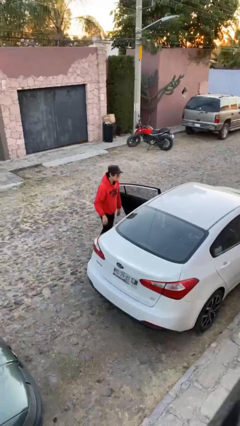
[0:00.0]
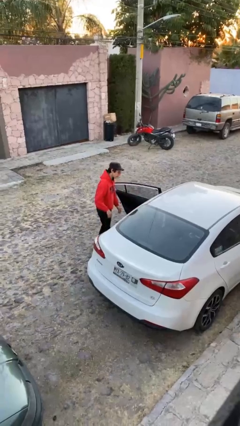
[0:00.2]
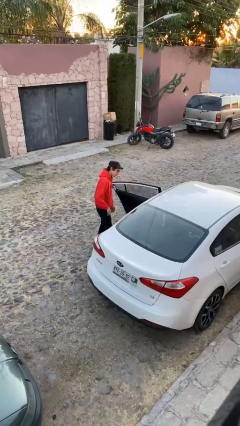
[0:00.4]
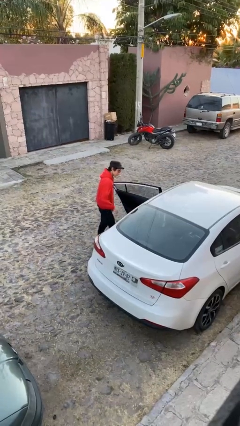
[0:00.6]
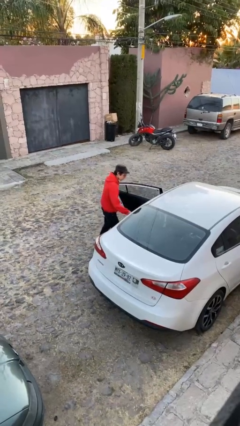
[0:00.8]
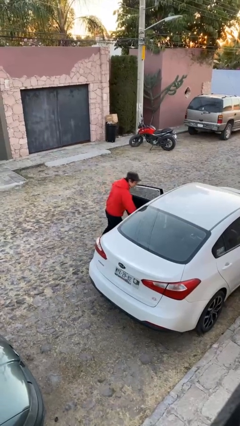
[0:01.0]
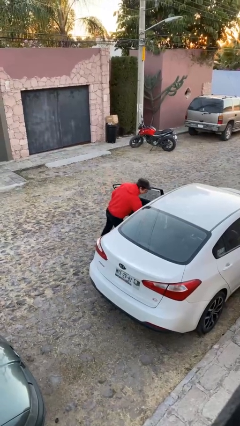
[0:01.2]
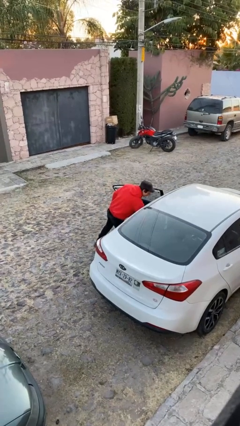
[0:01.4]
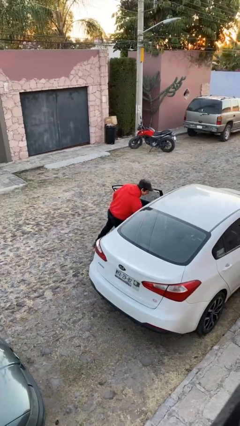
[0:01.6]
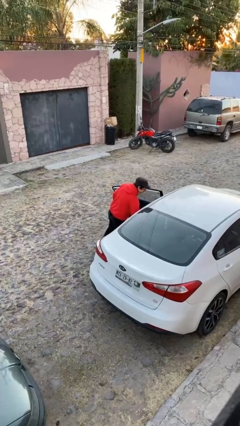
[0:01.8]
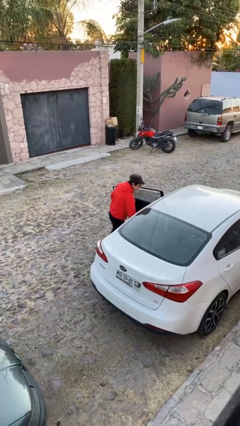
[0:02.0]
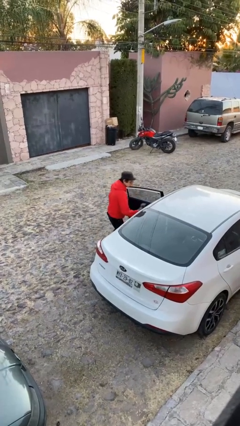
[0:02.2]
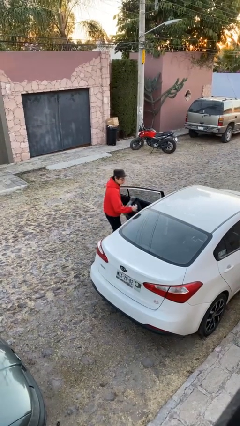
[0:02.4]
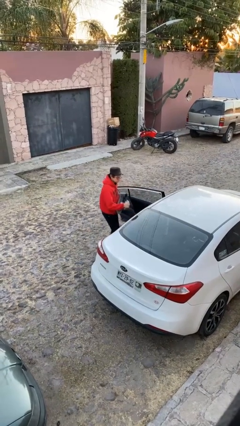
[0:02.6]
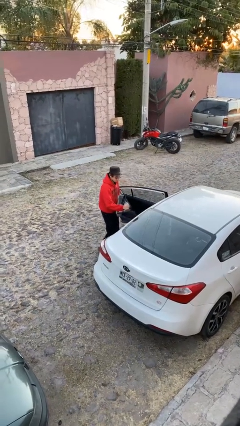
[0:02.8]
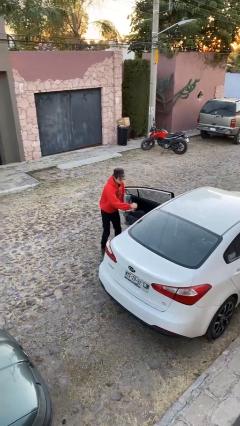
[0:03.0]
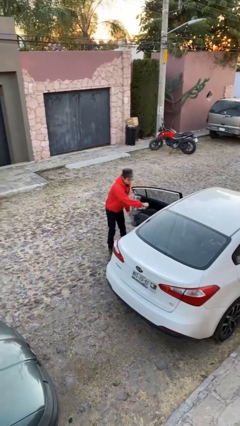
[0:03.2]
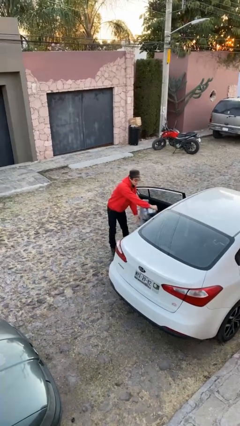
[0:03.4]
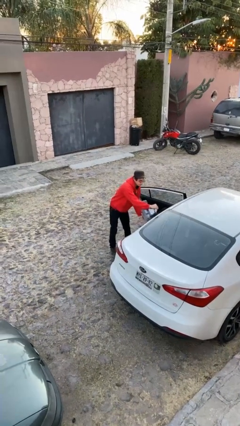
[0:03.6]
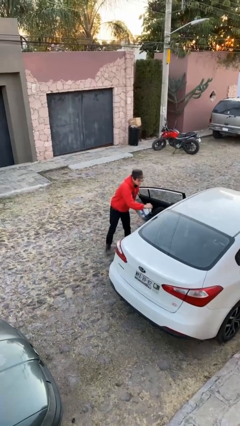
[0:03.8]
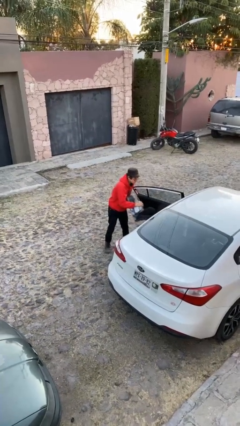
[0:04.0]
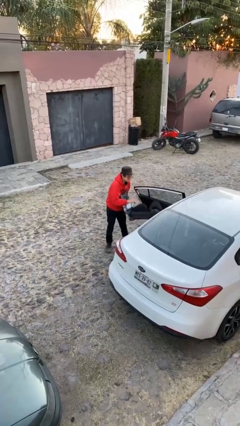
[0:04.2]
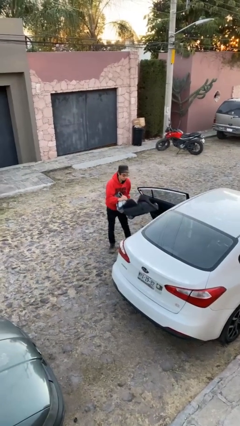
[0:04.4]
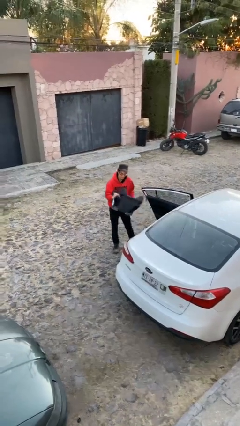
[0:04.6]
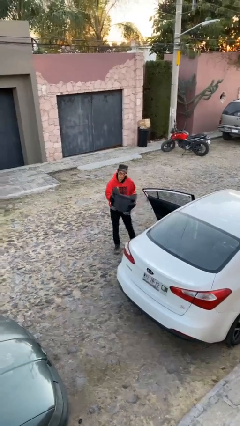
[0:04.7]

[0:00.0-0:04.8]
person unloads car

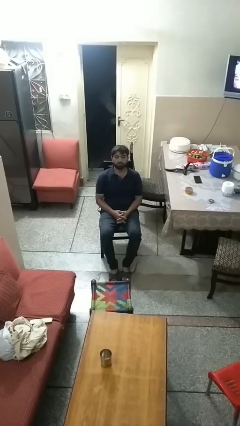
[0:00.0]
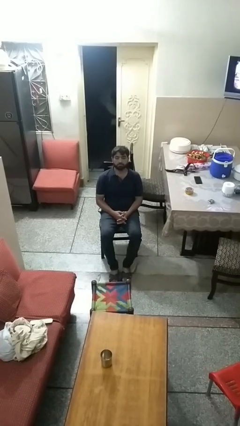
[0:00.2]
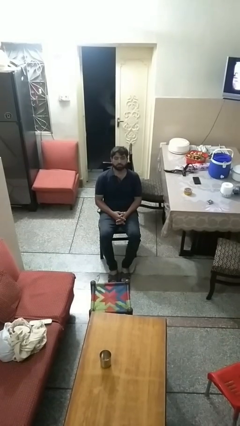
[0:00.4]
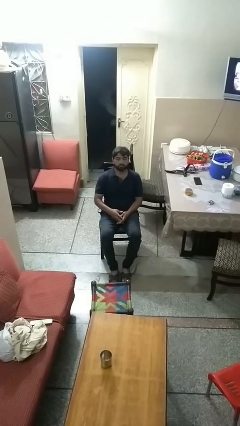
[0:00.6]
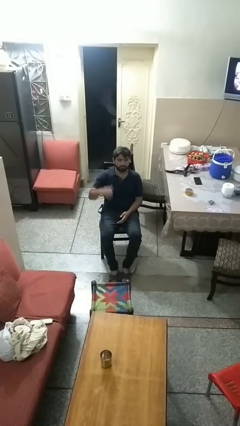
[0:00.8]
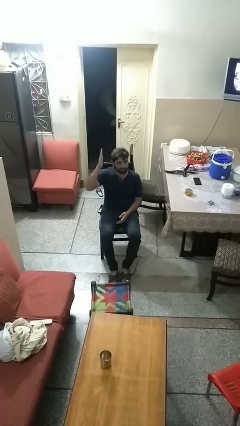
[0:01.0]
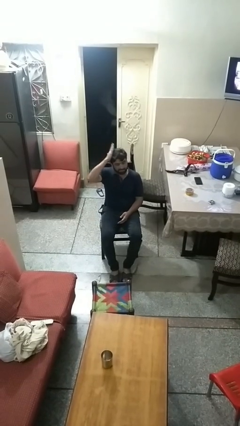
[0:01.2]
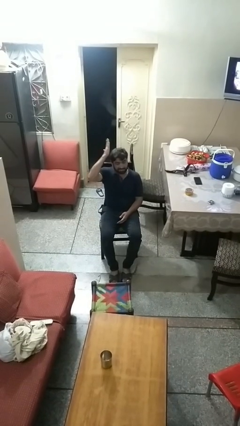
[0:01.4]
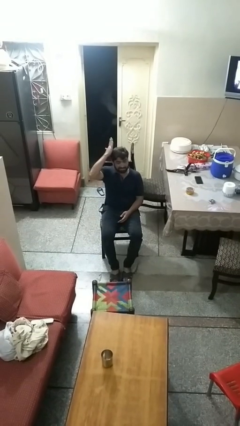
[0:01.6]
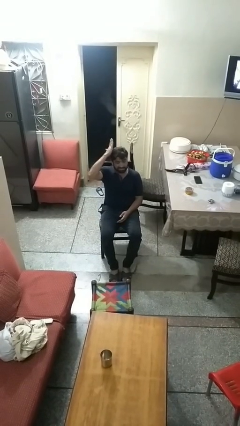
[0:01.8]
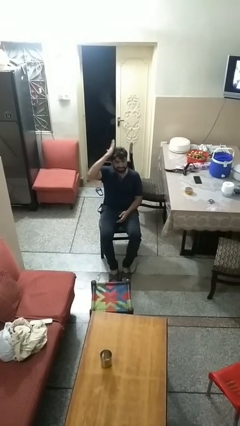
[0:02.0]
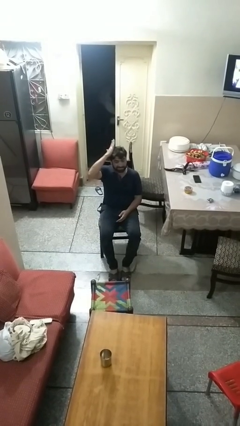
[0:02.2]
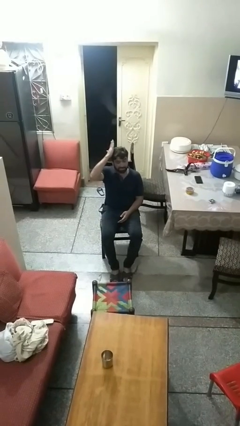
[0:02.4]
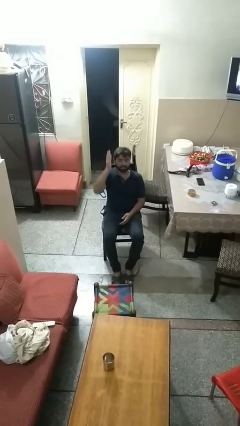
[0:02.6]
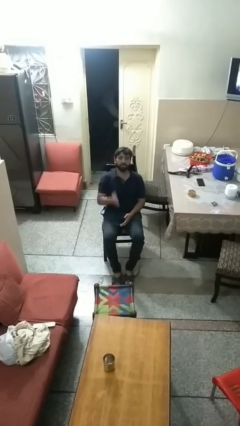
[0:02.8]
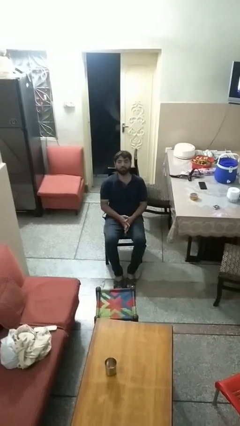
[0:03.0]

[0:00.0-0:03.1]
person pats head

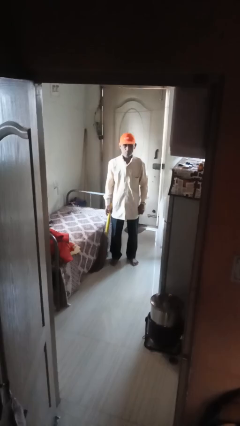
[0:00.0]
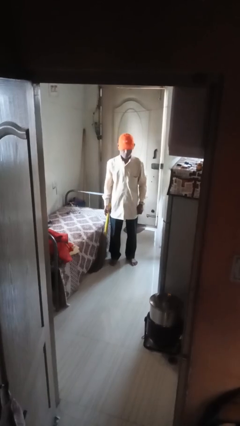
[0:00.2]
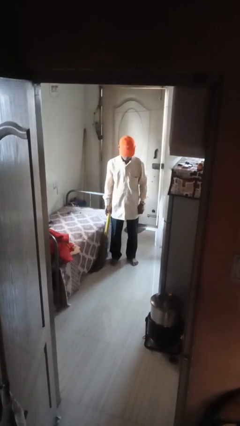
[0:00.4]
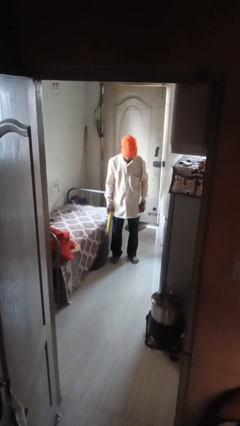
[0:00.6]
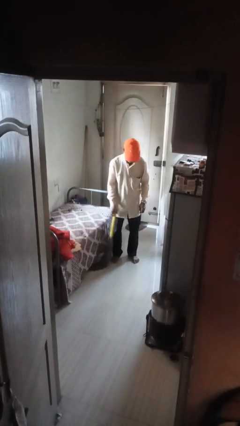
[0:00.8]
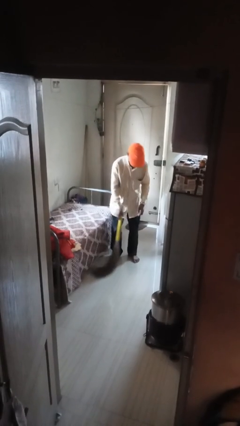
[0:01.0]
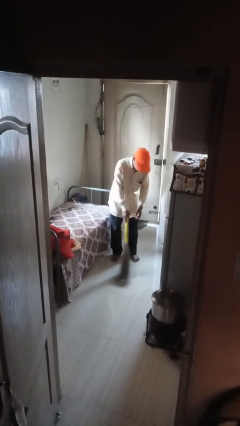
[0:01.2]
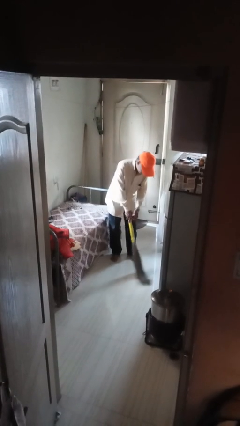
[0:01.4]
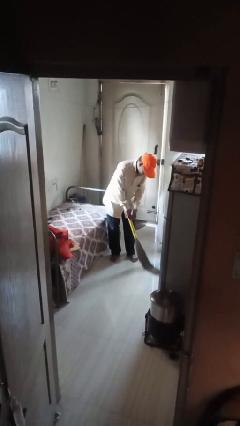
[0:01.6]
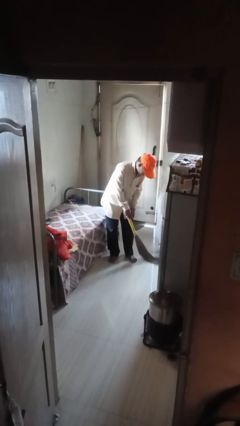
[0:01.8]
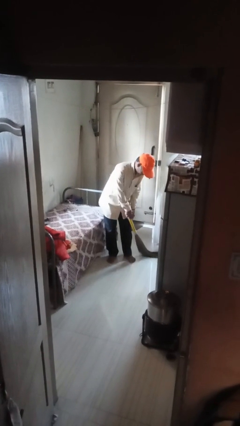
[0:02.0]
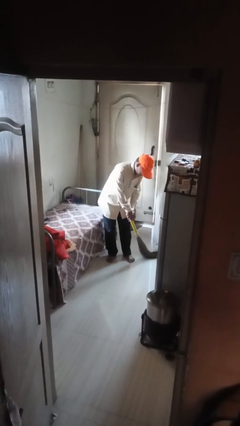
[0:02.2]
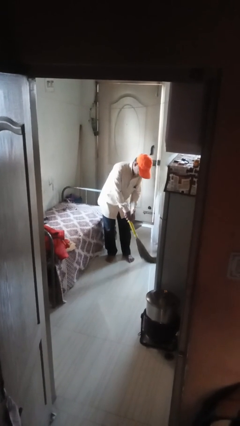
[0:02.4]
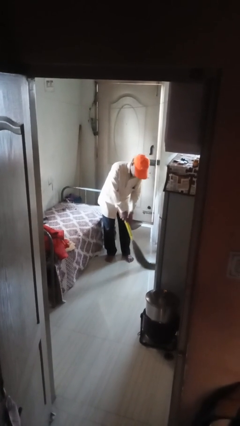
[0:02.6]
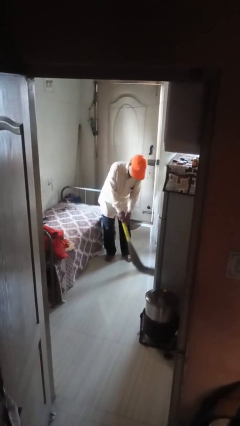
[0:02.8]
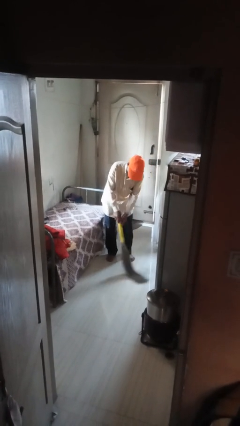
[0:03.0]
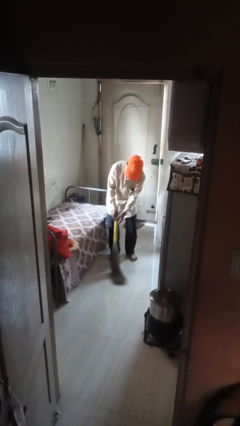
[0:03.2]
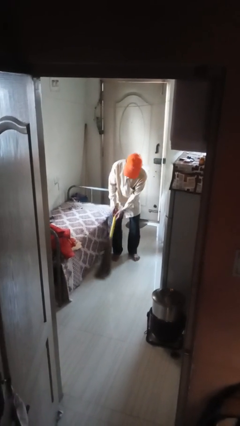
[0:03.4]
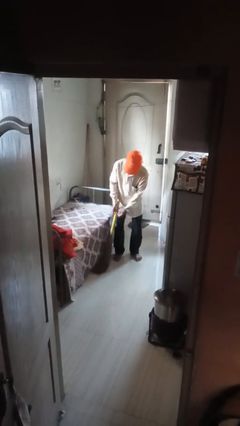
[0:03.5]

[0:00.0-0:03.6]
person sweeps floor

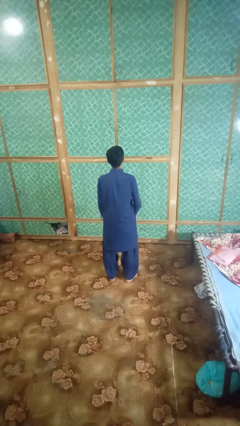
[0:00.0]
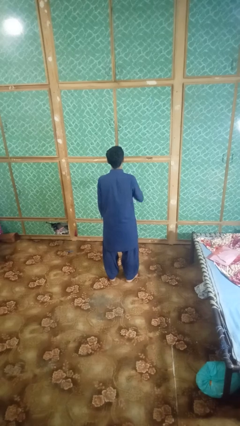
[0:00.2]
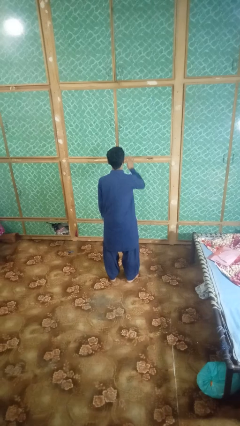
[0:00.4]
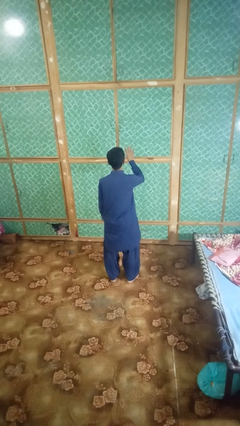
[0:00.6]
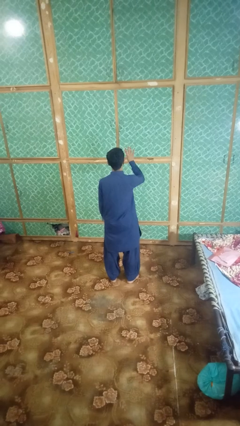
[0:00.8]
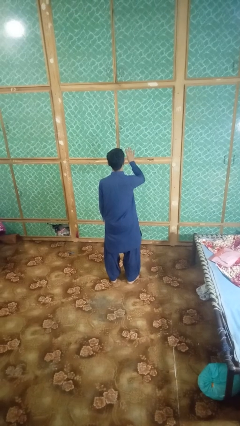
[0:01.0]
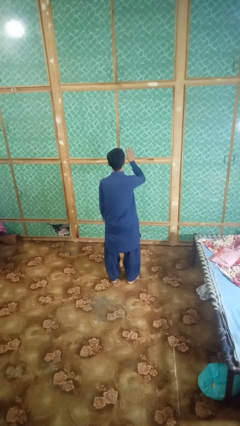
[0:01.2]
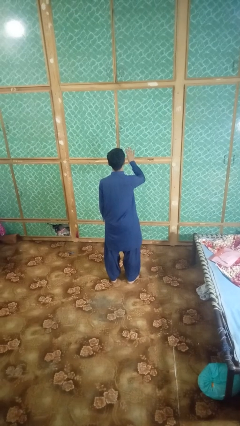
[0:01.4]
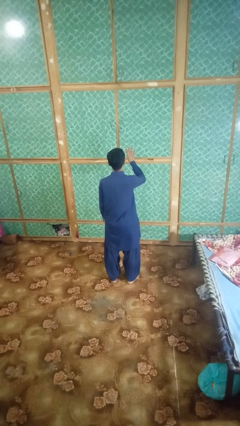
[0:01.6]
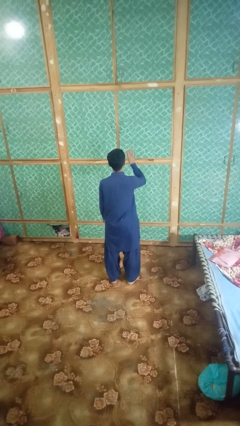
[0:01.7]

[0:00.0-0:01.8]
person gestures number four

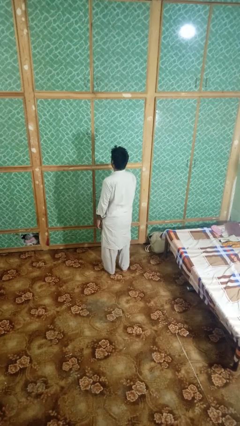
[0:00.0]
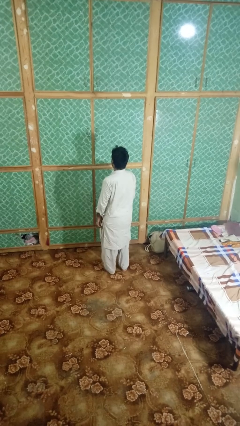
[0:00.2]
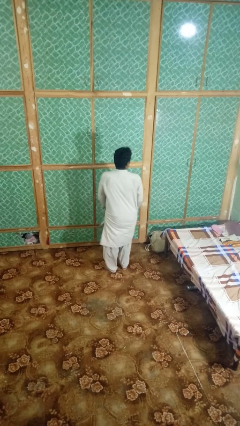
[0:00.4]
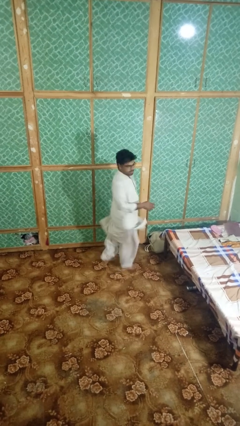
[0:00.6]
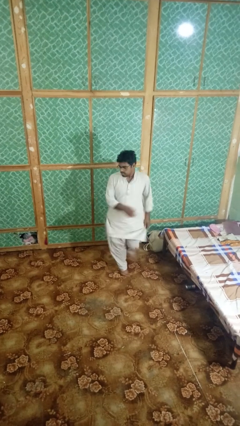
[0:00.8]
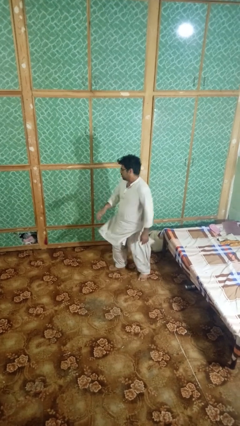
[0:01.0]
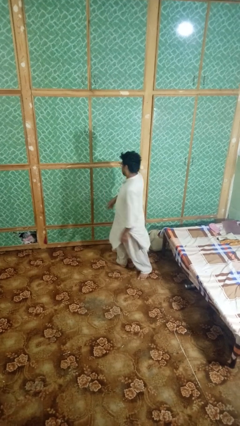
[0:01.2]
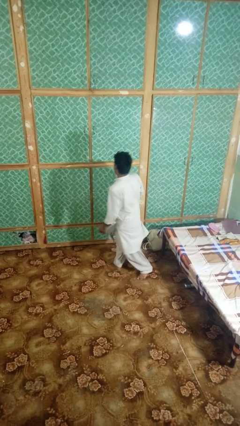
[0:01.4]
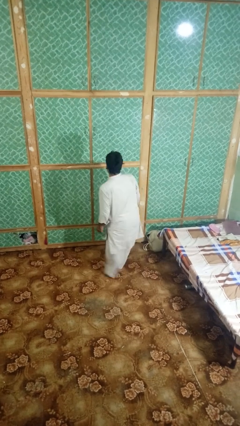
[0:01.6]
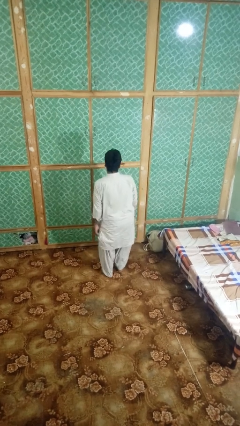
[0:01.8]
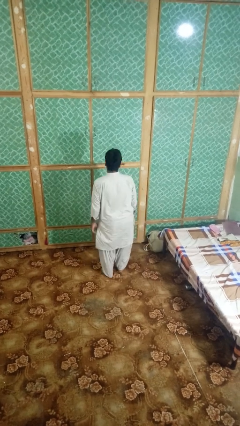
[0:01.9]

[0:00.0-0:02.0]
person twirls

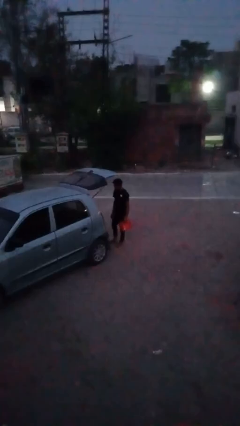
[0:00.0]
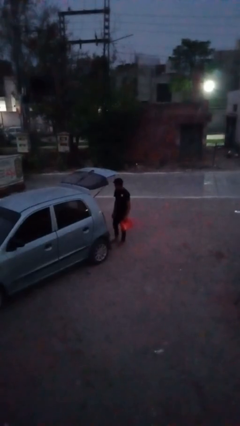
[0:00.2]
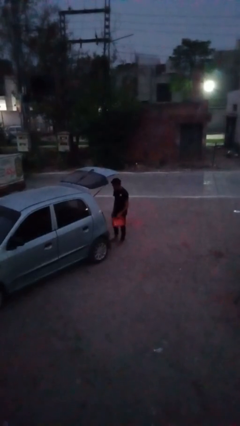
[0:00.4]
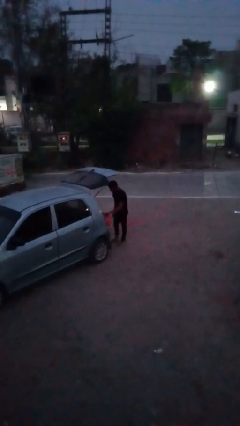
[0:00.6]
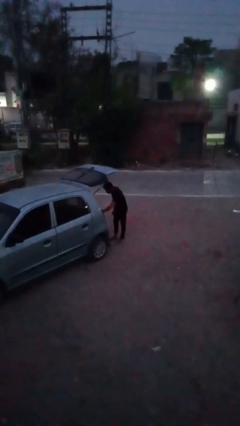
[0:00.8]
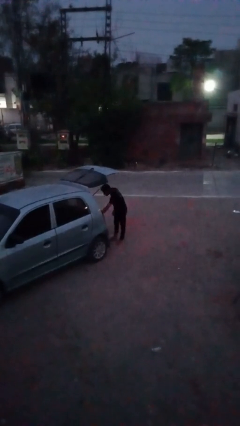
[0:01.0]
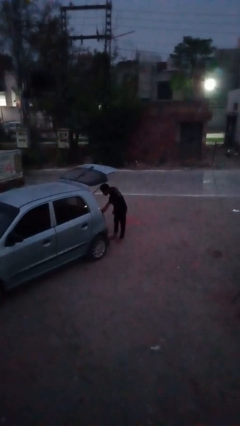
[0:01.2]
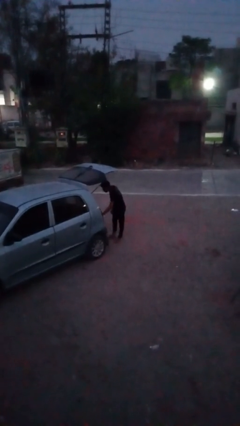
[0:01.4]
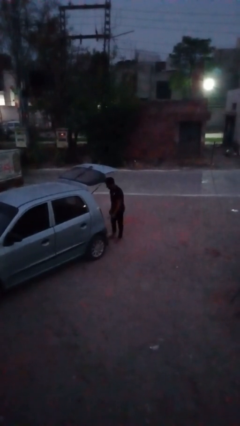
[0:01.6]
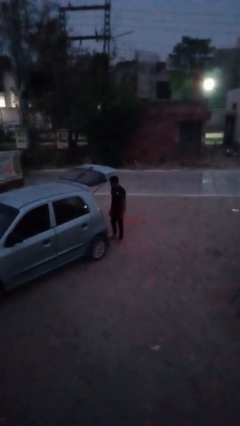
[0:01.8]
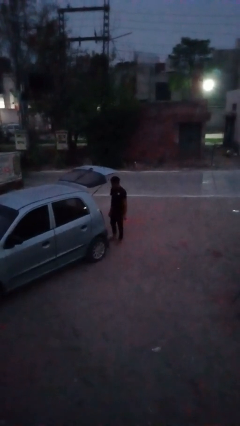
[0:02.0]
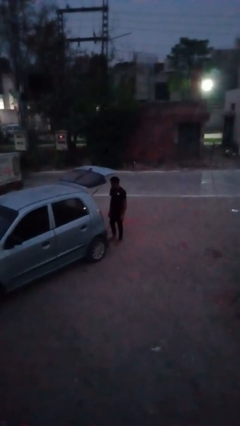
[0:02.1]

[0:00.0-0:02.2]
person loads car
